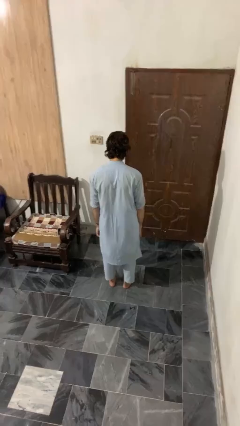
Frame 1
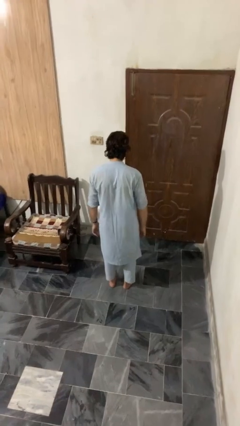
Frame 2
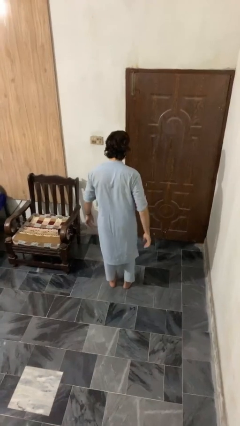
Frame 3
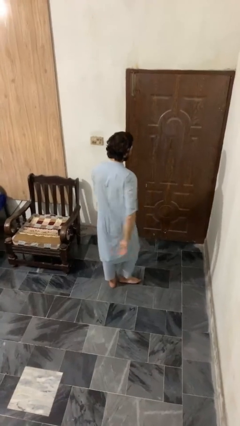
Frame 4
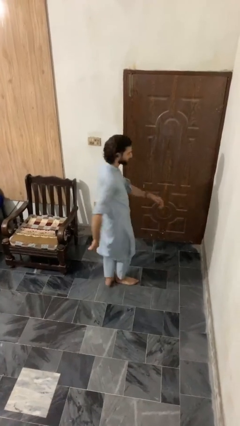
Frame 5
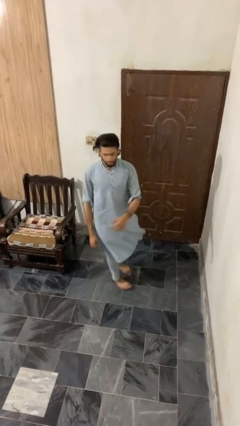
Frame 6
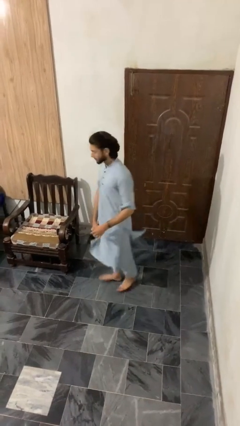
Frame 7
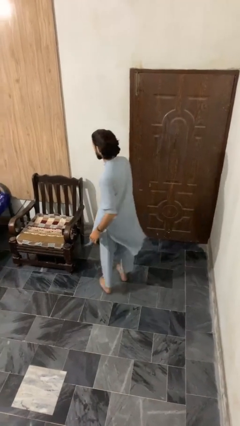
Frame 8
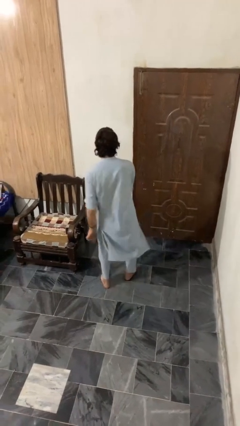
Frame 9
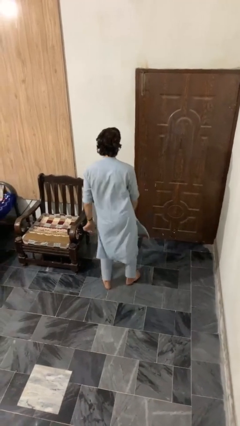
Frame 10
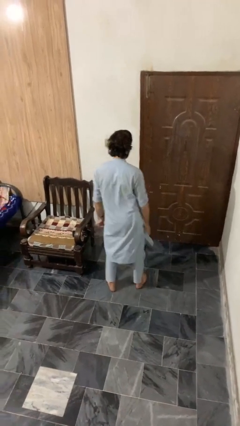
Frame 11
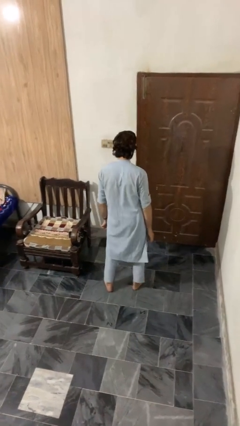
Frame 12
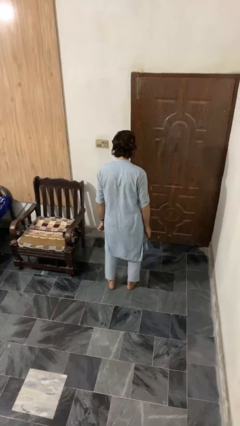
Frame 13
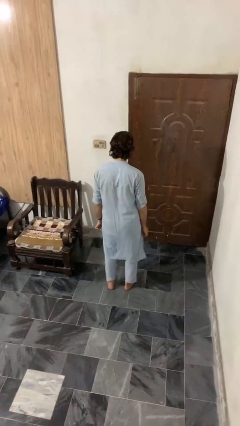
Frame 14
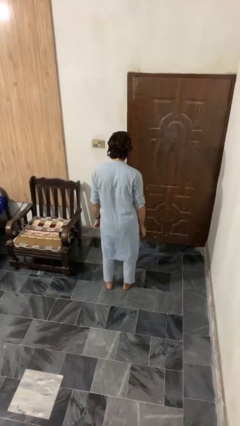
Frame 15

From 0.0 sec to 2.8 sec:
person twirls

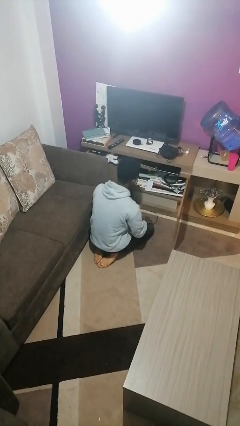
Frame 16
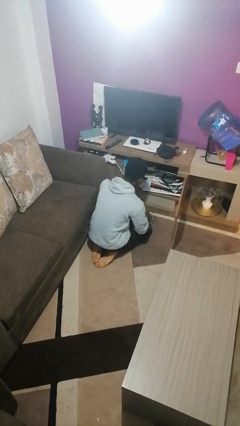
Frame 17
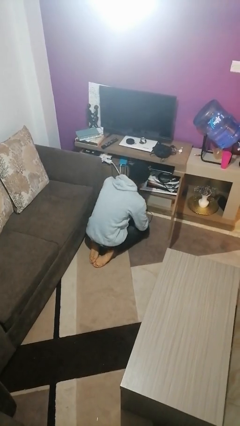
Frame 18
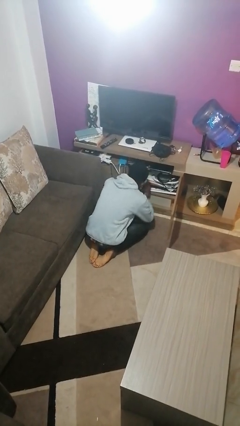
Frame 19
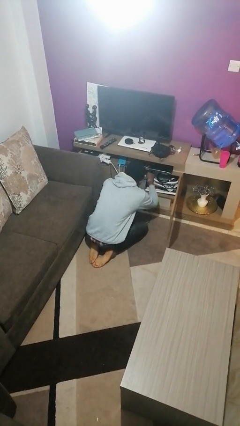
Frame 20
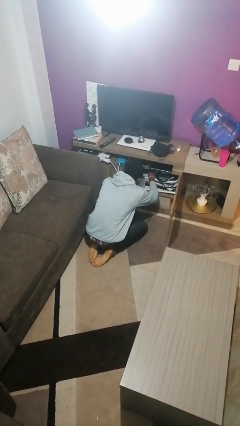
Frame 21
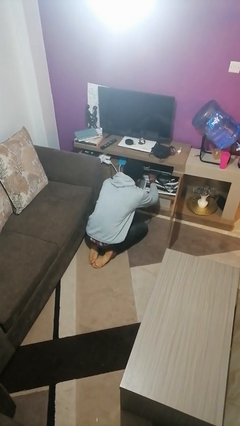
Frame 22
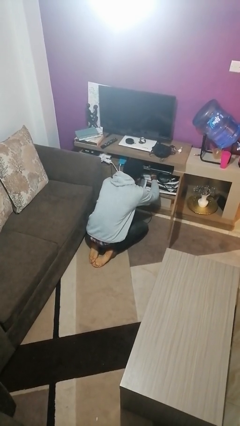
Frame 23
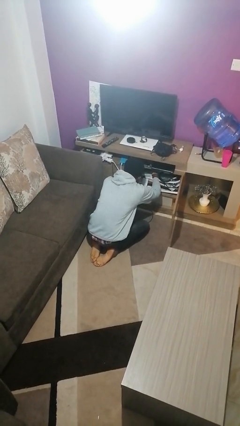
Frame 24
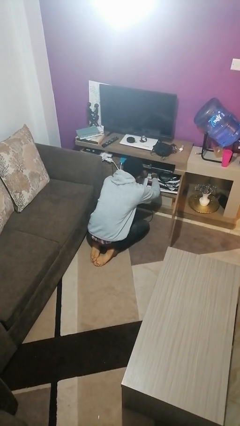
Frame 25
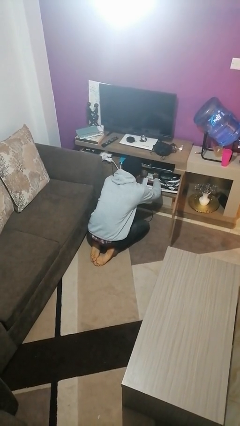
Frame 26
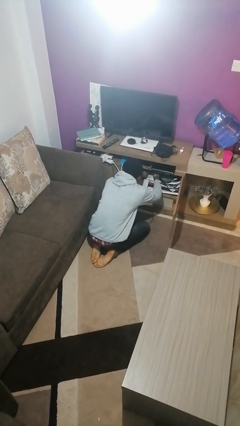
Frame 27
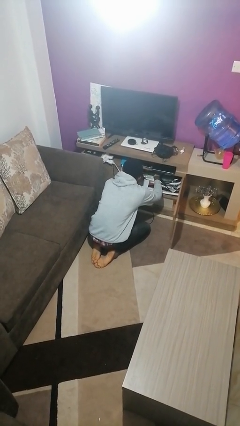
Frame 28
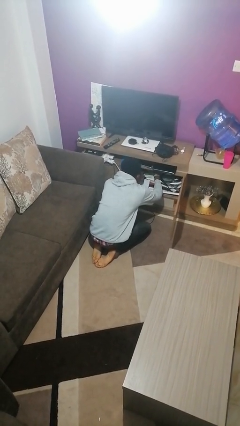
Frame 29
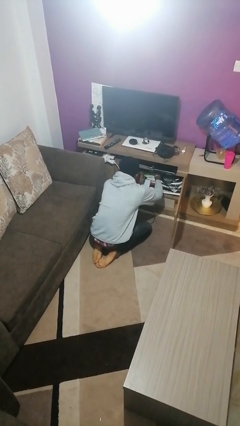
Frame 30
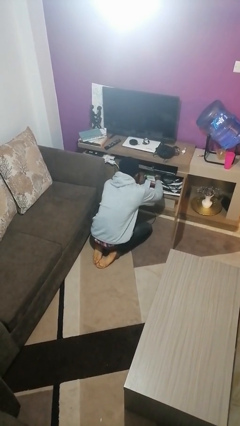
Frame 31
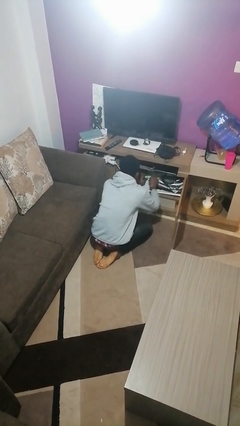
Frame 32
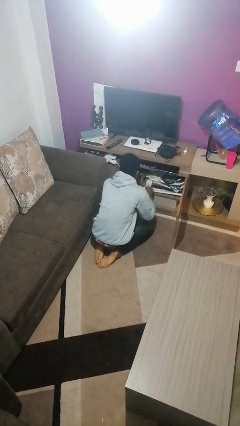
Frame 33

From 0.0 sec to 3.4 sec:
person searches in cabinet

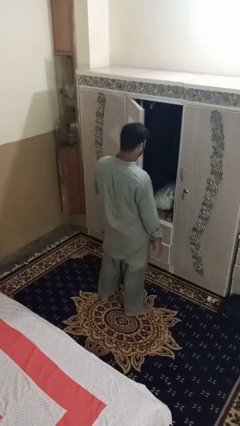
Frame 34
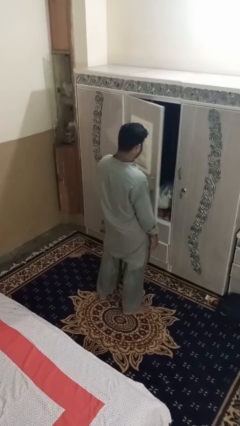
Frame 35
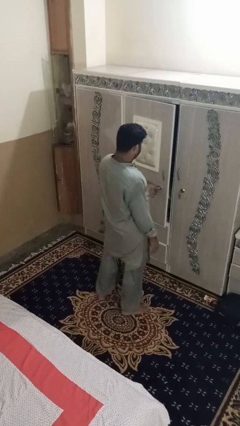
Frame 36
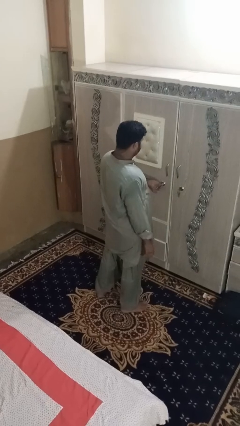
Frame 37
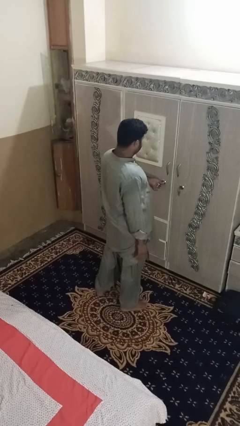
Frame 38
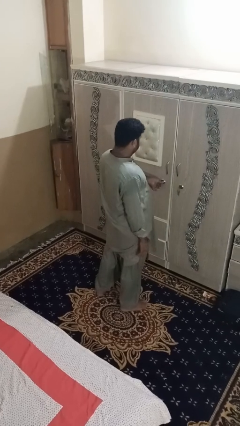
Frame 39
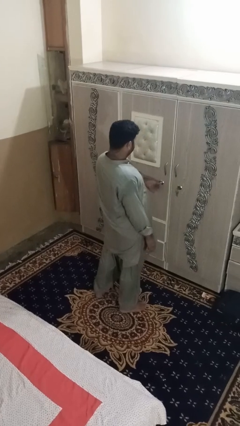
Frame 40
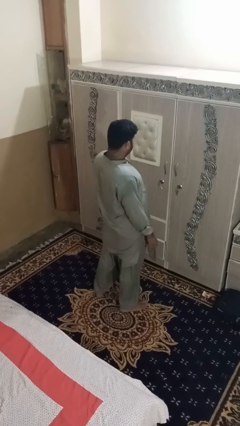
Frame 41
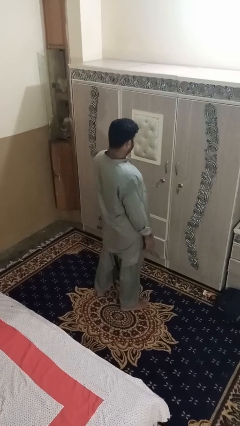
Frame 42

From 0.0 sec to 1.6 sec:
person closes dresser drawer

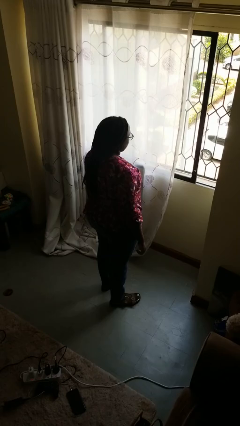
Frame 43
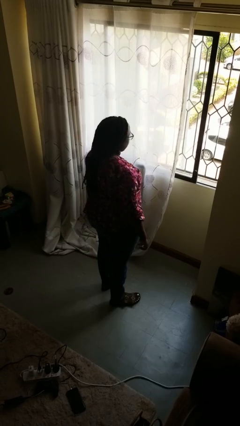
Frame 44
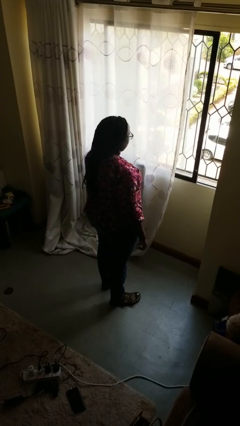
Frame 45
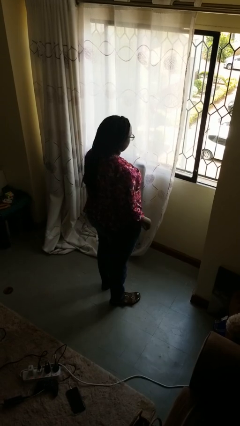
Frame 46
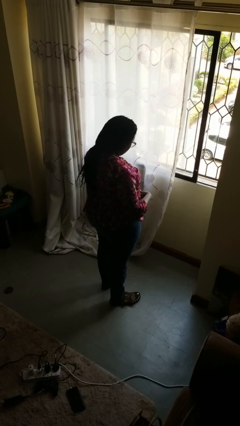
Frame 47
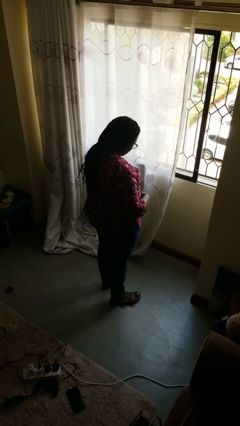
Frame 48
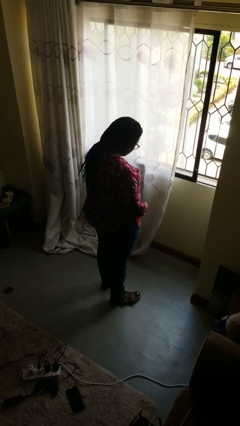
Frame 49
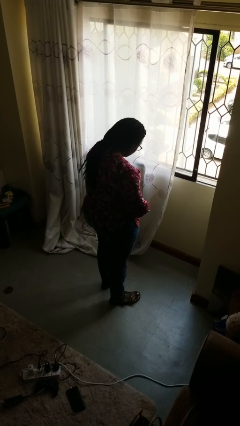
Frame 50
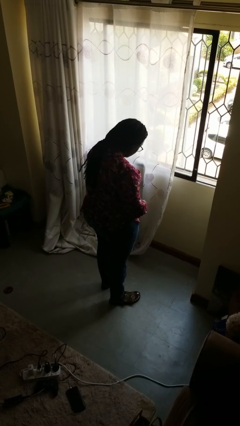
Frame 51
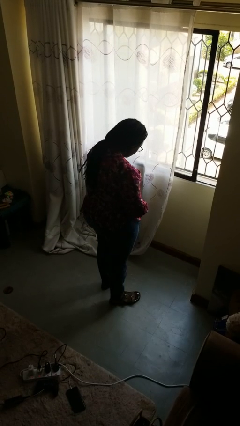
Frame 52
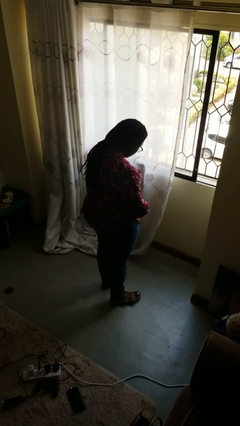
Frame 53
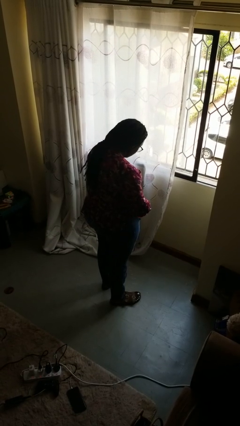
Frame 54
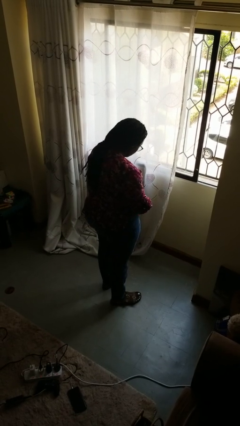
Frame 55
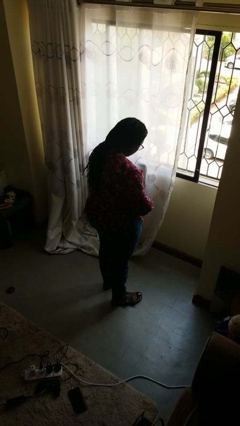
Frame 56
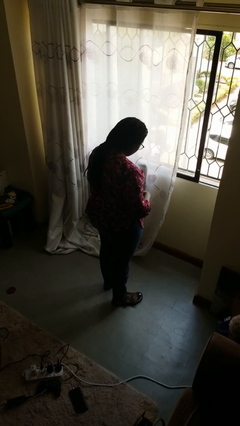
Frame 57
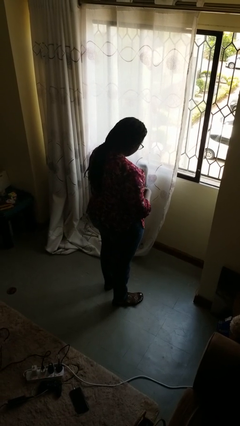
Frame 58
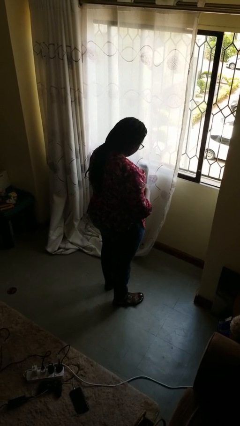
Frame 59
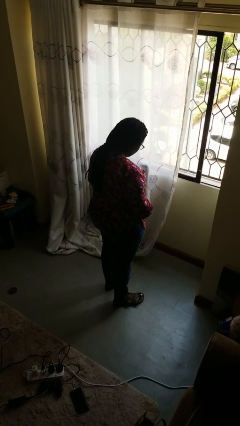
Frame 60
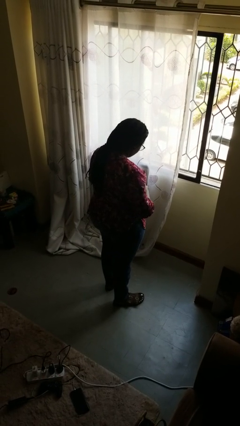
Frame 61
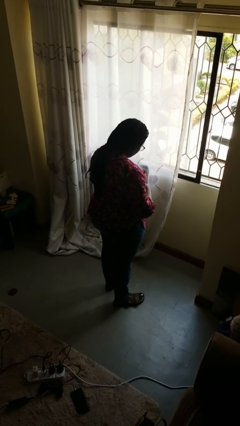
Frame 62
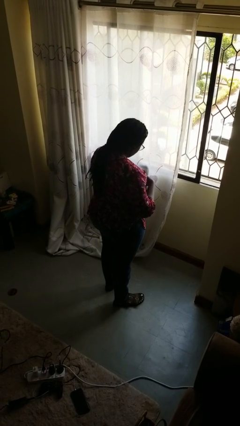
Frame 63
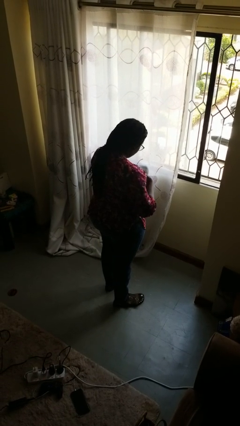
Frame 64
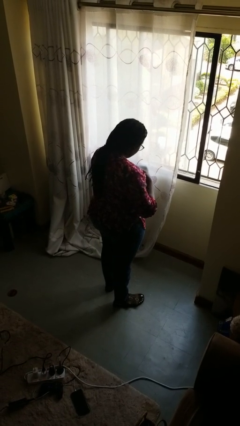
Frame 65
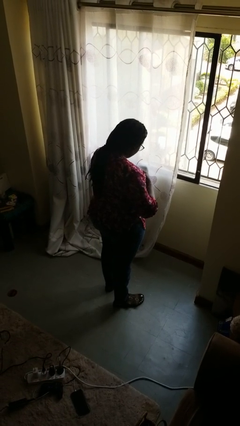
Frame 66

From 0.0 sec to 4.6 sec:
person buttons shirt

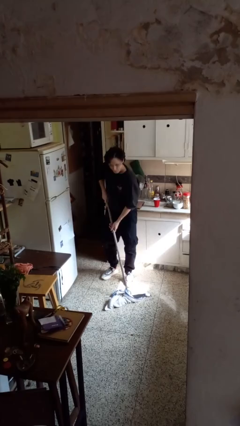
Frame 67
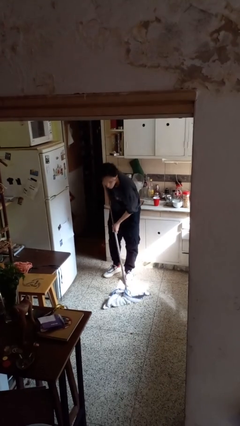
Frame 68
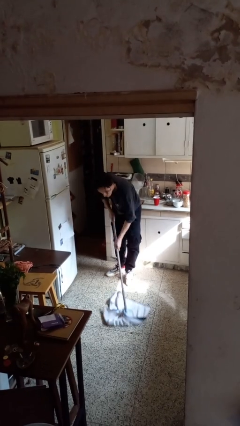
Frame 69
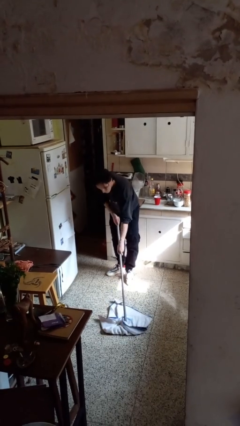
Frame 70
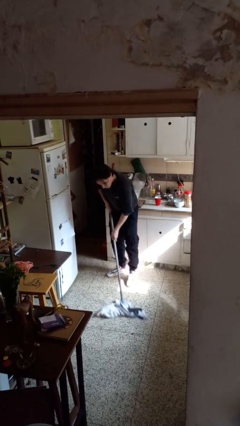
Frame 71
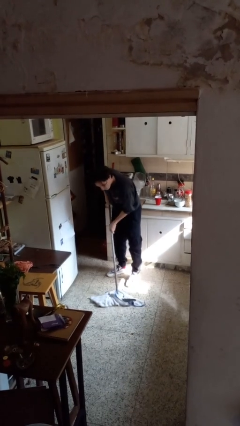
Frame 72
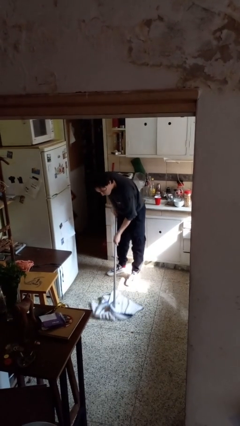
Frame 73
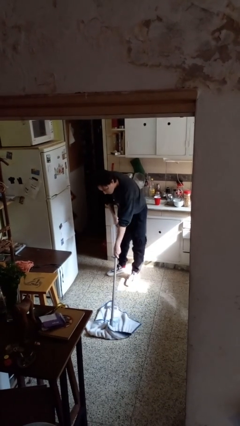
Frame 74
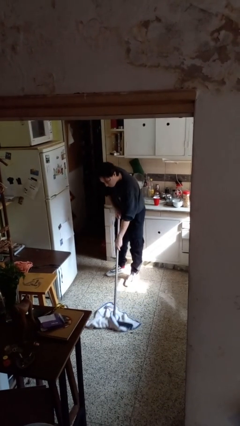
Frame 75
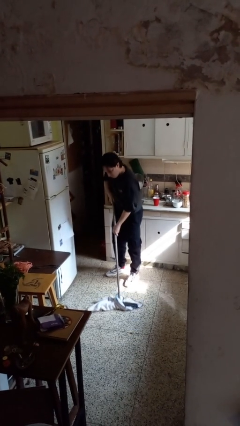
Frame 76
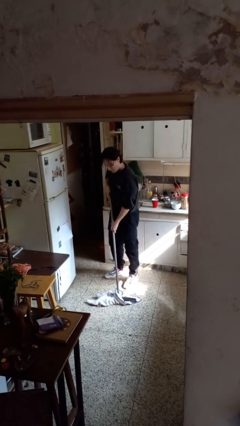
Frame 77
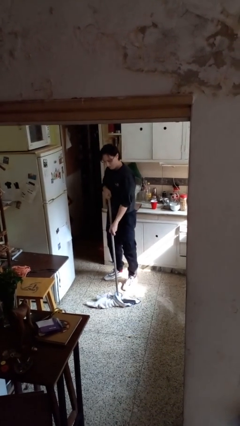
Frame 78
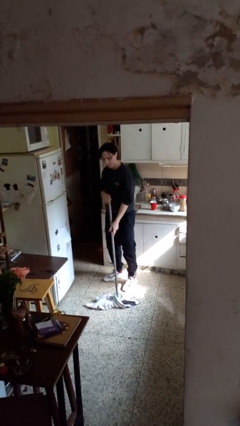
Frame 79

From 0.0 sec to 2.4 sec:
person mops

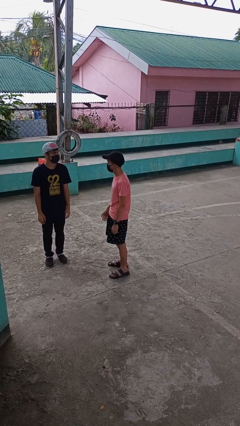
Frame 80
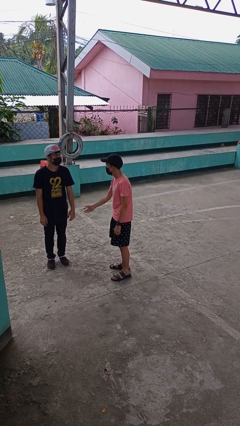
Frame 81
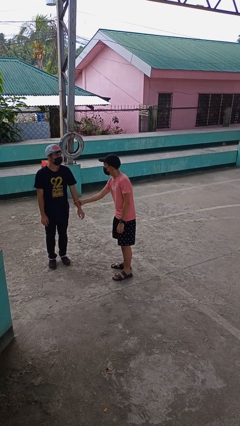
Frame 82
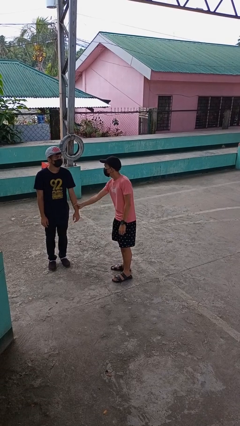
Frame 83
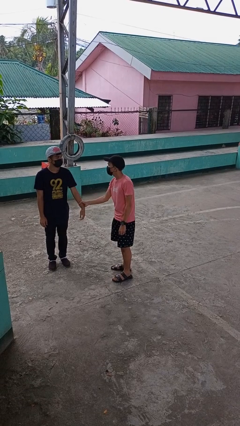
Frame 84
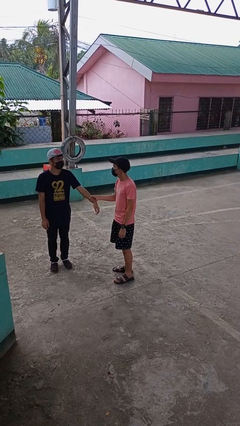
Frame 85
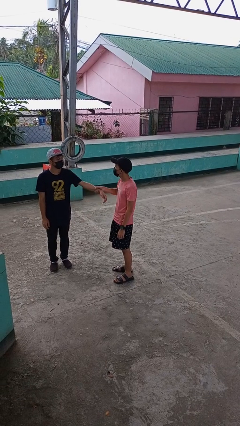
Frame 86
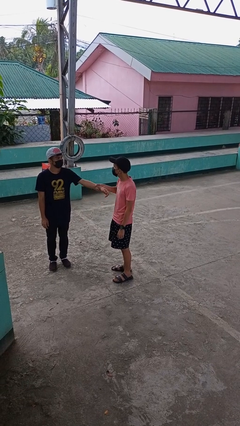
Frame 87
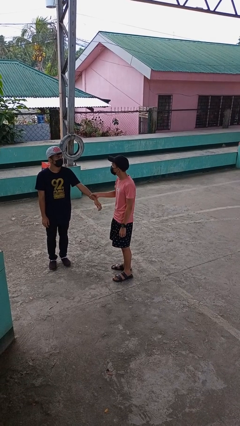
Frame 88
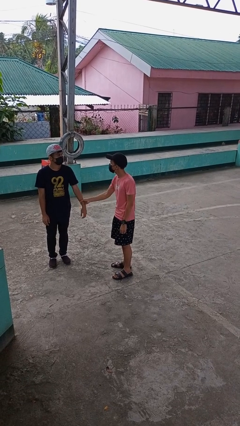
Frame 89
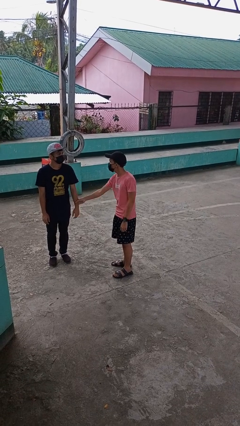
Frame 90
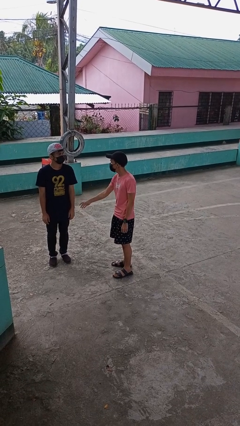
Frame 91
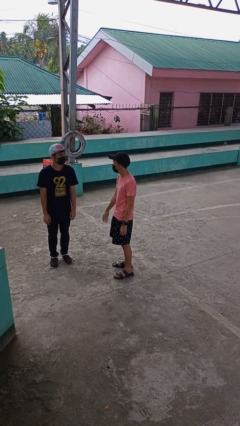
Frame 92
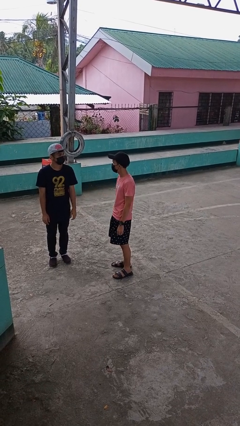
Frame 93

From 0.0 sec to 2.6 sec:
person grabs person by forearm
